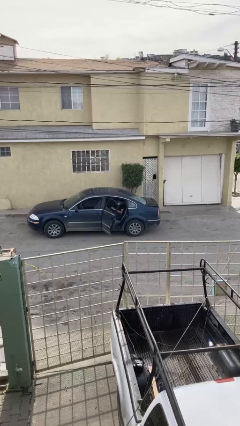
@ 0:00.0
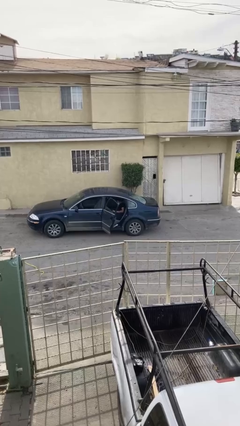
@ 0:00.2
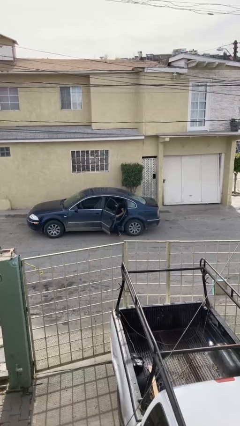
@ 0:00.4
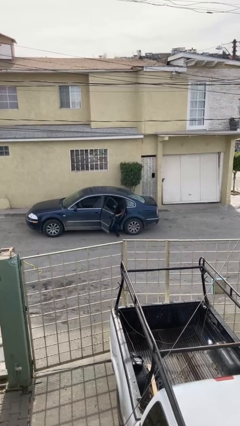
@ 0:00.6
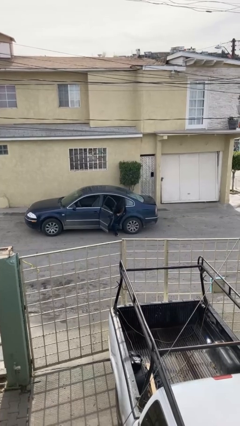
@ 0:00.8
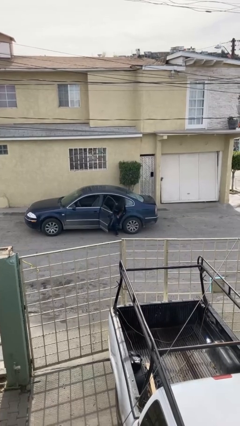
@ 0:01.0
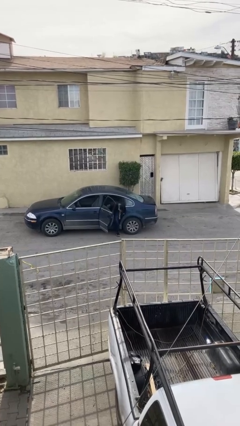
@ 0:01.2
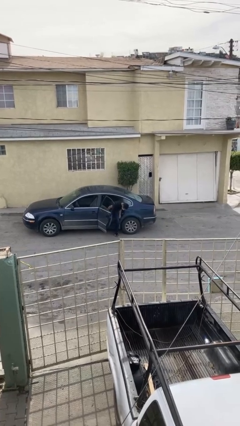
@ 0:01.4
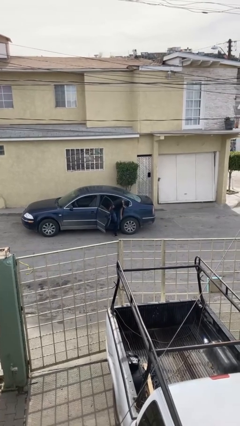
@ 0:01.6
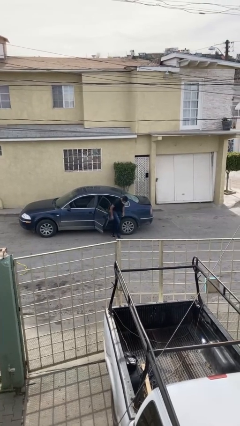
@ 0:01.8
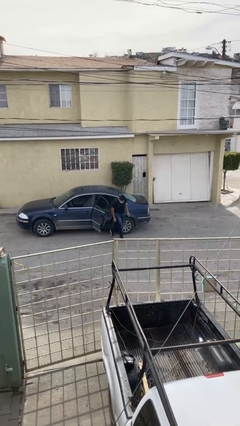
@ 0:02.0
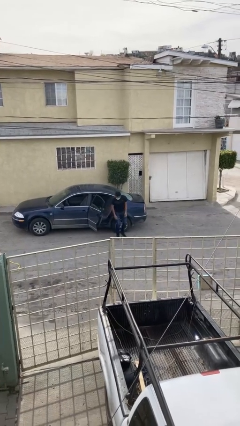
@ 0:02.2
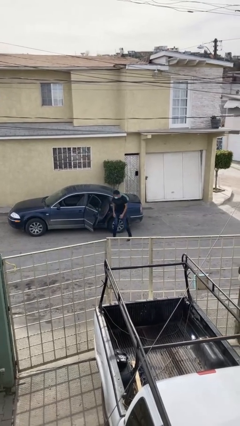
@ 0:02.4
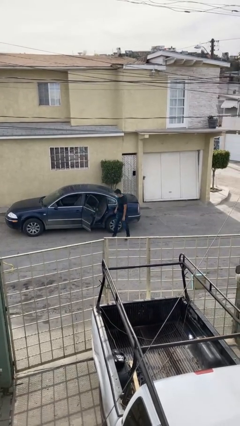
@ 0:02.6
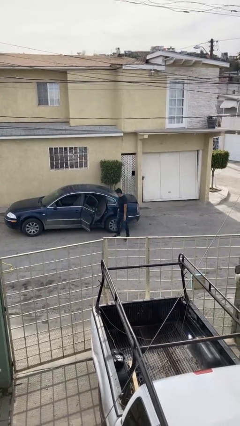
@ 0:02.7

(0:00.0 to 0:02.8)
person exits car

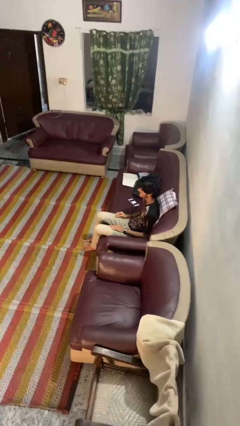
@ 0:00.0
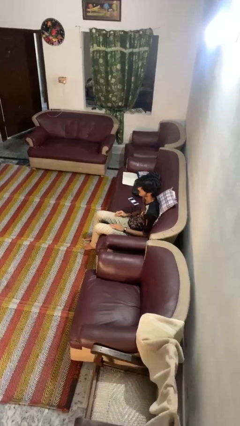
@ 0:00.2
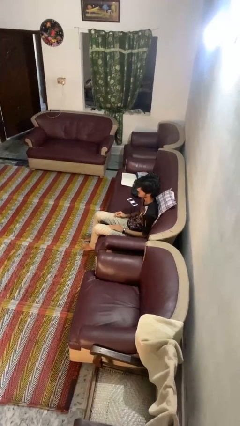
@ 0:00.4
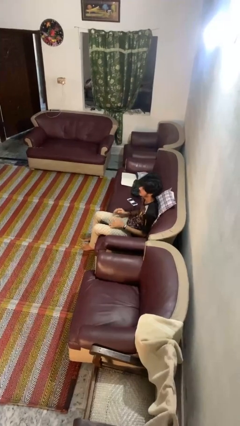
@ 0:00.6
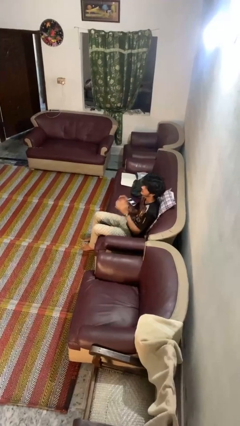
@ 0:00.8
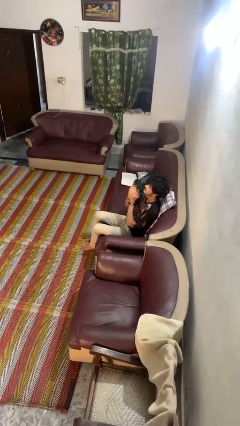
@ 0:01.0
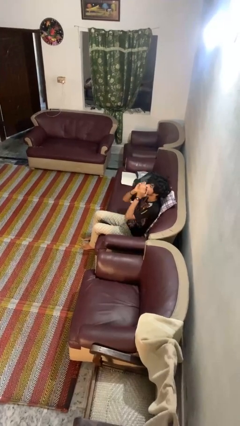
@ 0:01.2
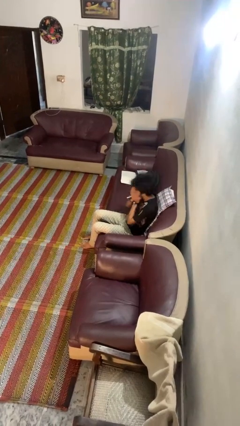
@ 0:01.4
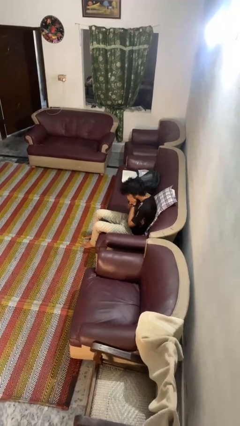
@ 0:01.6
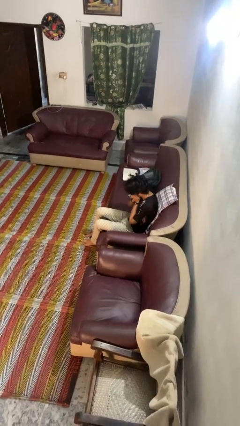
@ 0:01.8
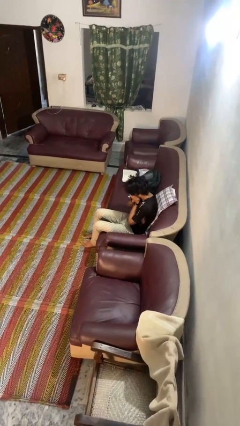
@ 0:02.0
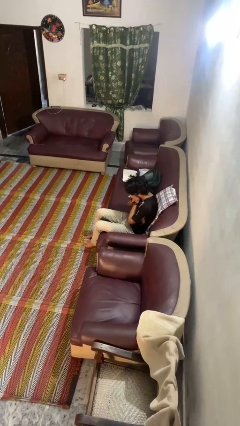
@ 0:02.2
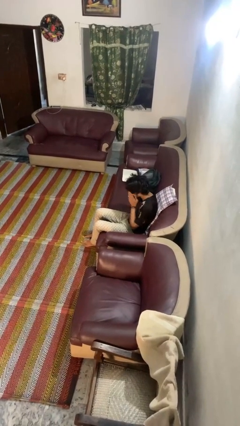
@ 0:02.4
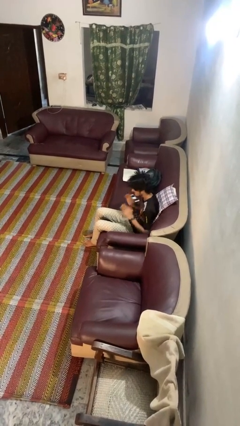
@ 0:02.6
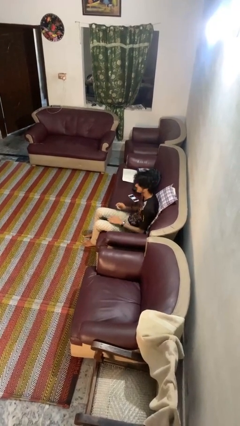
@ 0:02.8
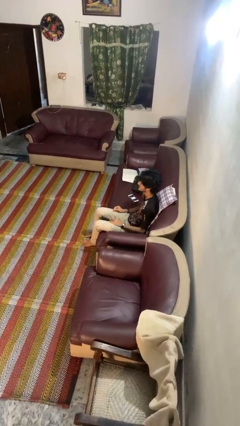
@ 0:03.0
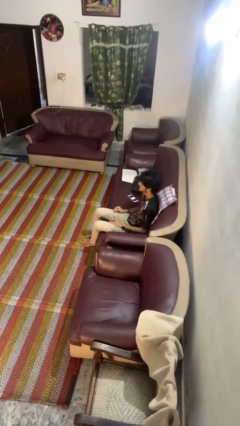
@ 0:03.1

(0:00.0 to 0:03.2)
person sneezes into hand

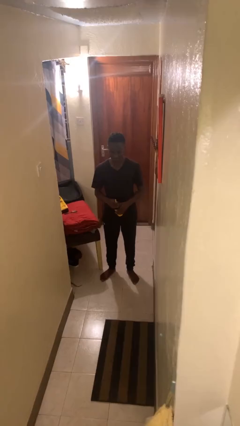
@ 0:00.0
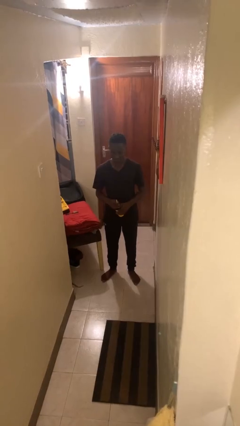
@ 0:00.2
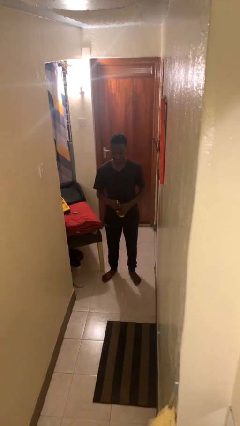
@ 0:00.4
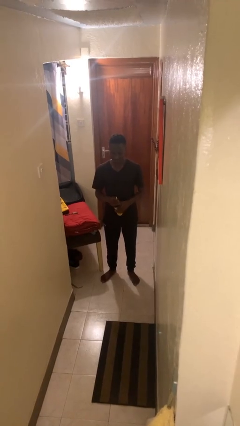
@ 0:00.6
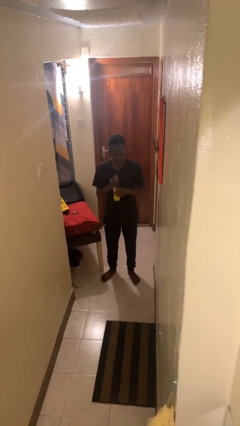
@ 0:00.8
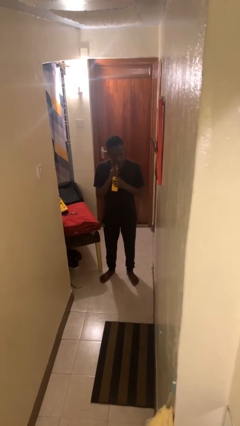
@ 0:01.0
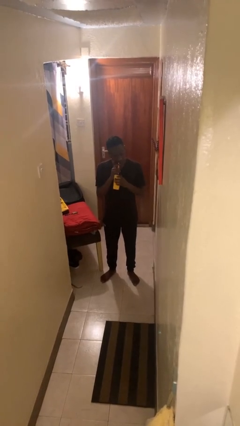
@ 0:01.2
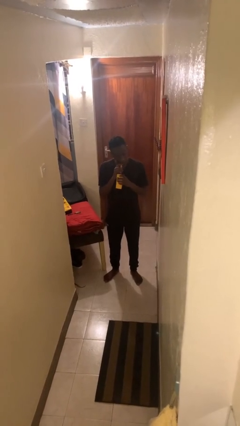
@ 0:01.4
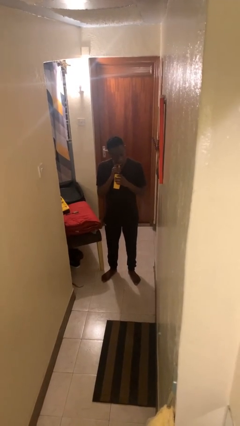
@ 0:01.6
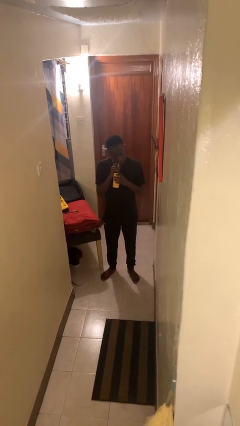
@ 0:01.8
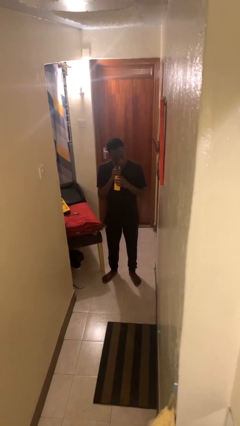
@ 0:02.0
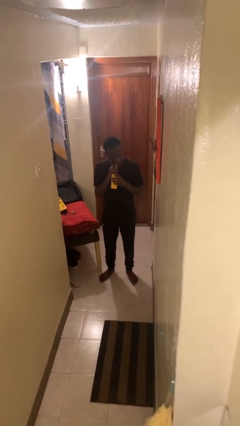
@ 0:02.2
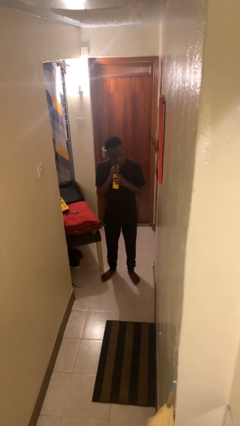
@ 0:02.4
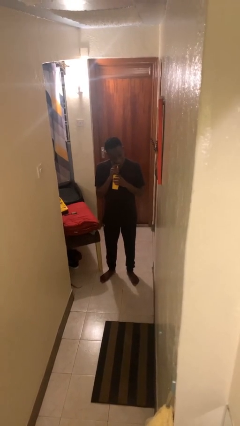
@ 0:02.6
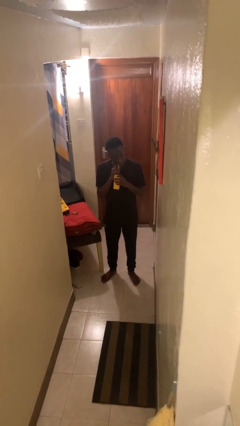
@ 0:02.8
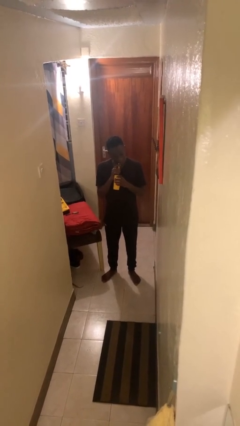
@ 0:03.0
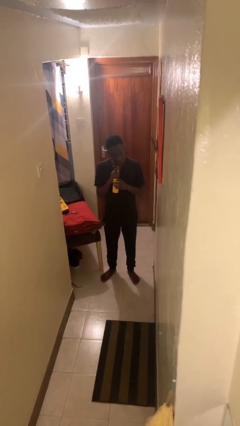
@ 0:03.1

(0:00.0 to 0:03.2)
person drinks from straw

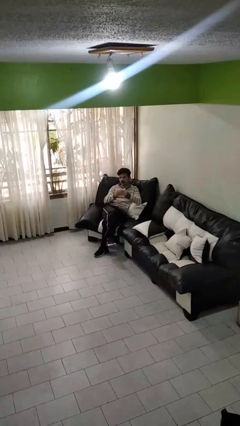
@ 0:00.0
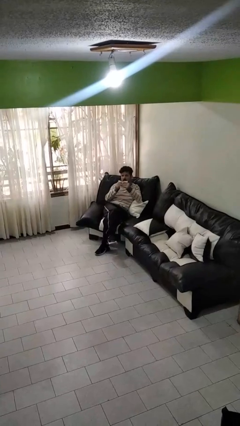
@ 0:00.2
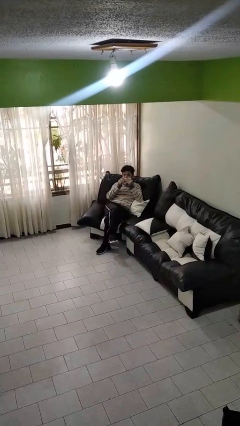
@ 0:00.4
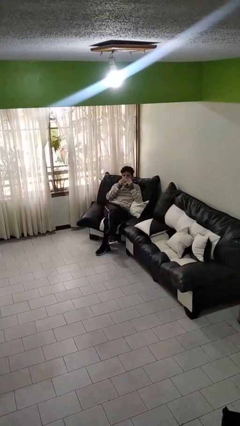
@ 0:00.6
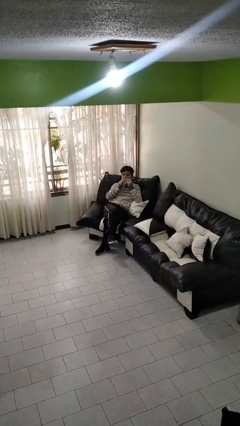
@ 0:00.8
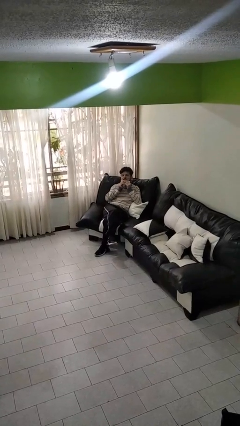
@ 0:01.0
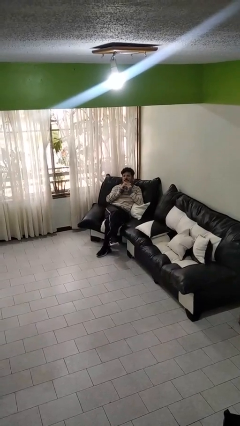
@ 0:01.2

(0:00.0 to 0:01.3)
person wipes mouth with napkin

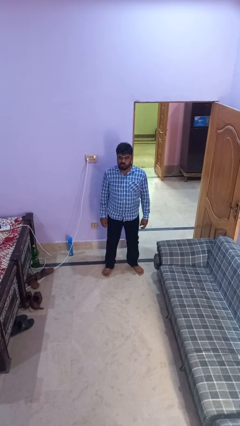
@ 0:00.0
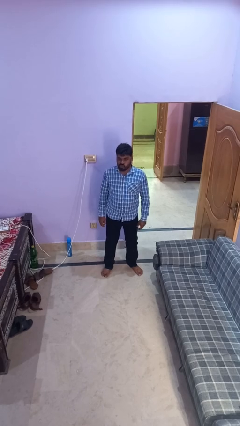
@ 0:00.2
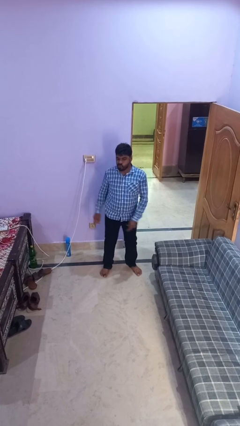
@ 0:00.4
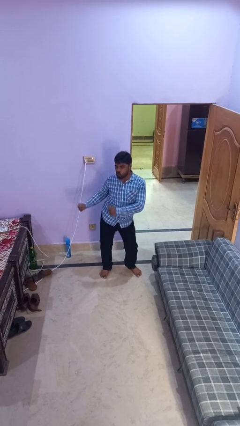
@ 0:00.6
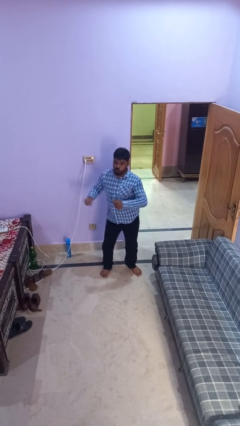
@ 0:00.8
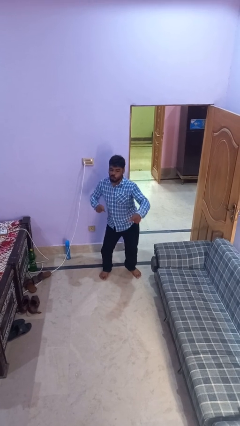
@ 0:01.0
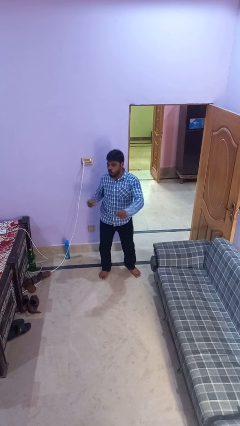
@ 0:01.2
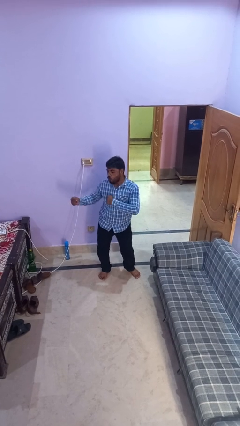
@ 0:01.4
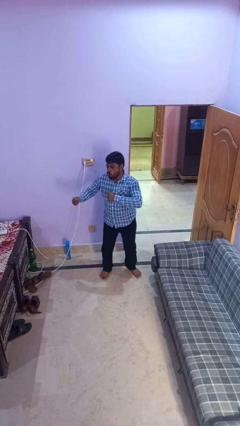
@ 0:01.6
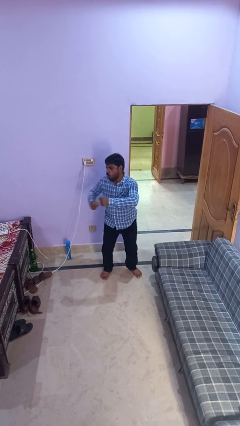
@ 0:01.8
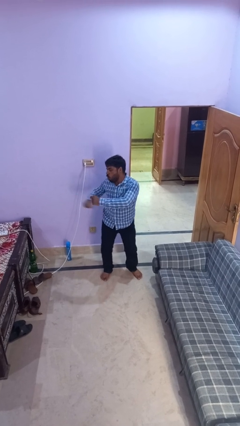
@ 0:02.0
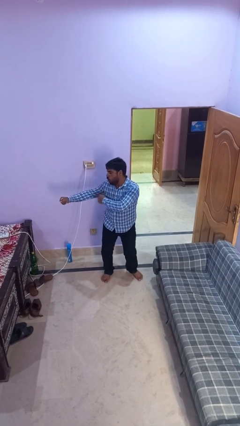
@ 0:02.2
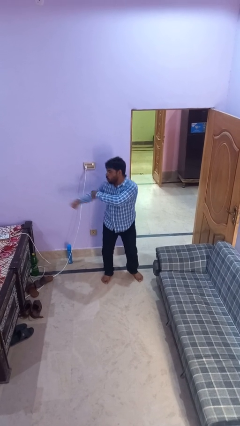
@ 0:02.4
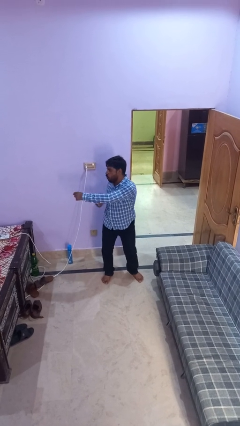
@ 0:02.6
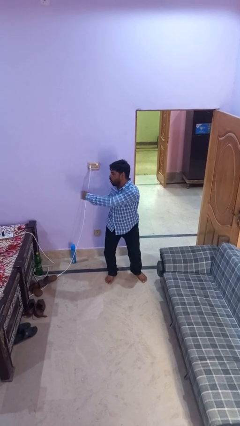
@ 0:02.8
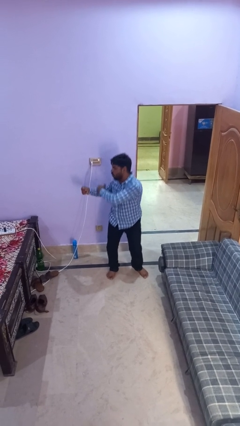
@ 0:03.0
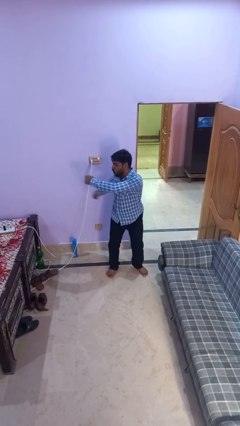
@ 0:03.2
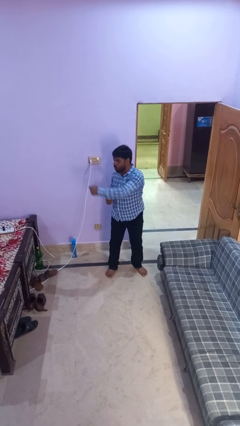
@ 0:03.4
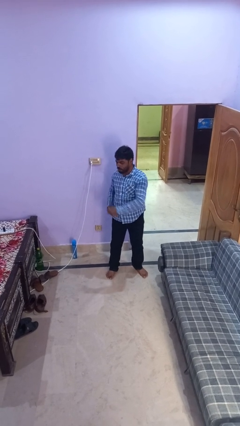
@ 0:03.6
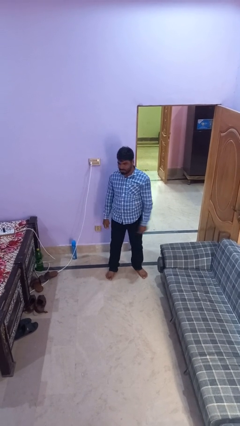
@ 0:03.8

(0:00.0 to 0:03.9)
person dances in place

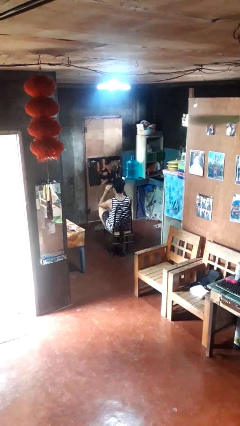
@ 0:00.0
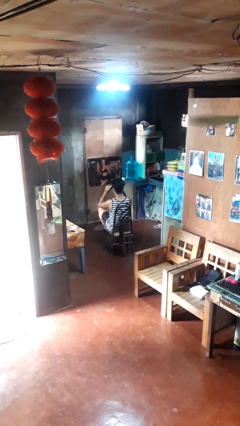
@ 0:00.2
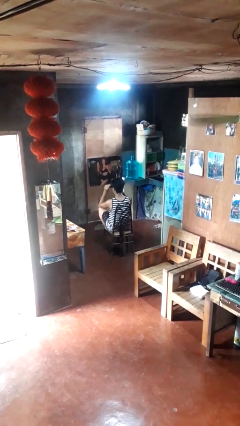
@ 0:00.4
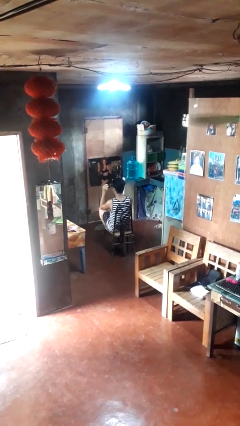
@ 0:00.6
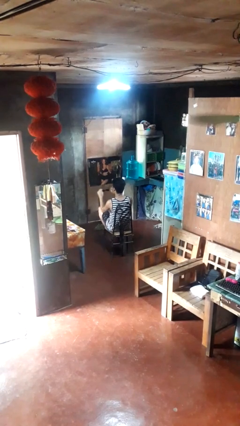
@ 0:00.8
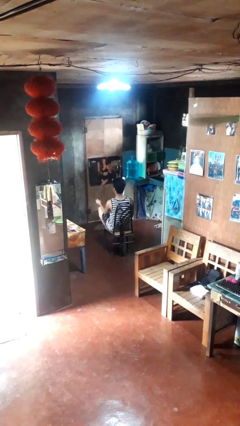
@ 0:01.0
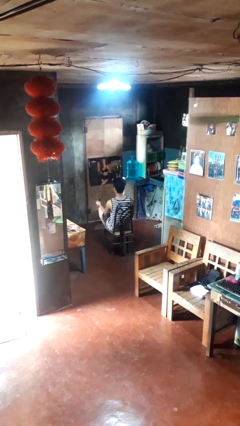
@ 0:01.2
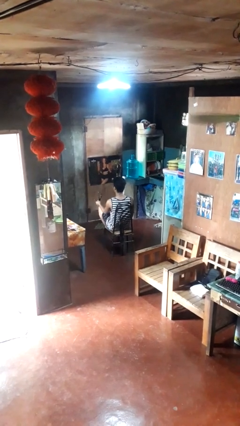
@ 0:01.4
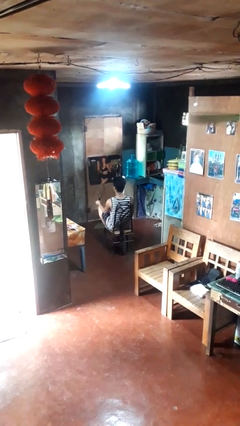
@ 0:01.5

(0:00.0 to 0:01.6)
person takes off sunglasses

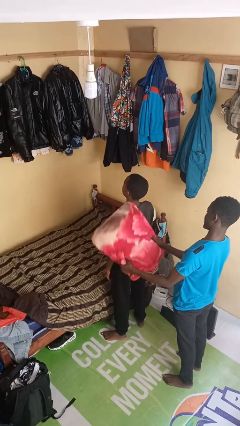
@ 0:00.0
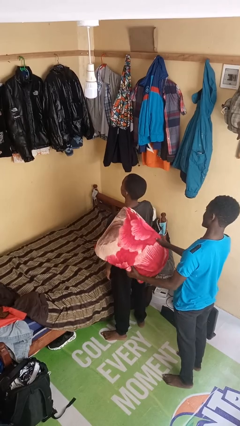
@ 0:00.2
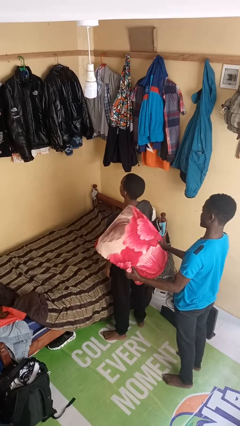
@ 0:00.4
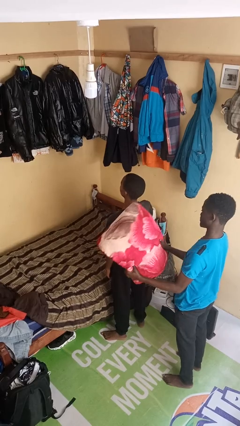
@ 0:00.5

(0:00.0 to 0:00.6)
person hits person with pillow

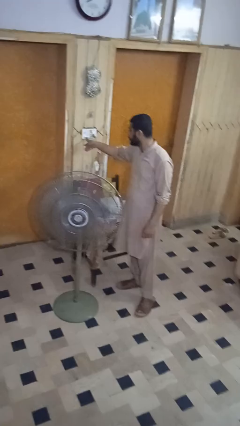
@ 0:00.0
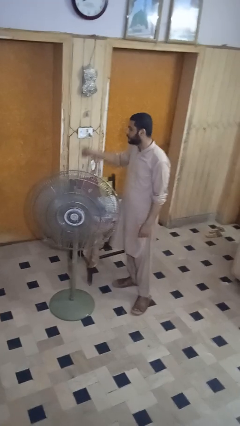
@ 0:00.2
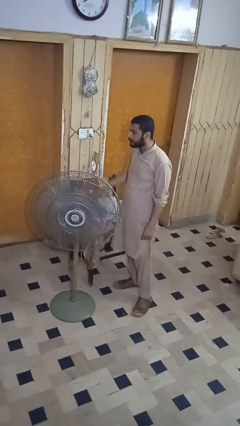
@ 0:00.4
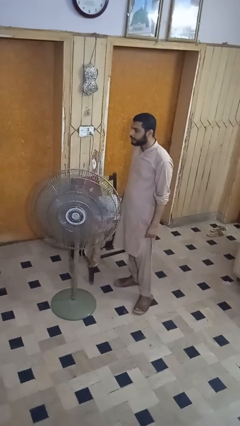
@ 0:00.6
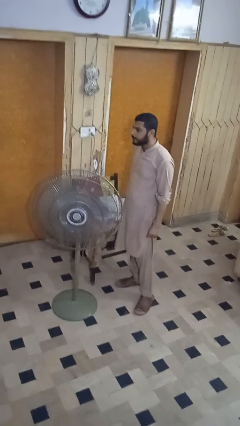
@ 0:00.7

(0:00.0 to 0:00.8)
person turns on fan
